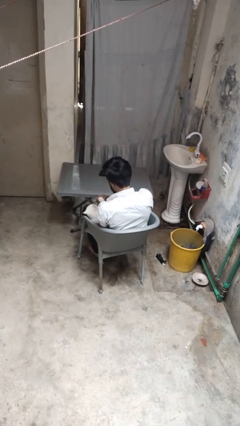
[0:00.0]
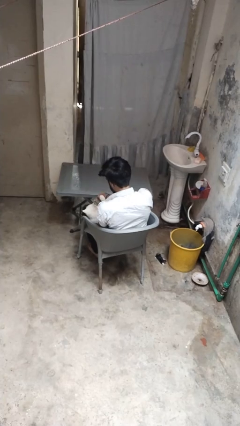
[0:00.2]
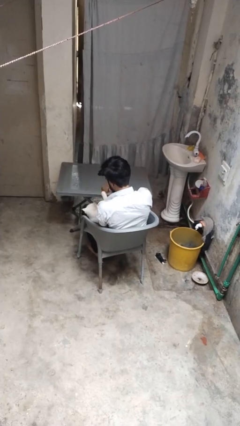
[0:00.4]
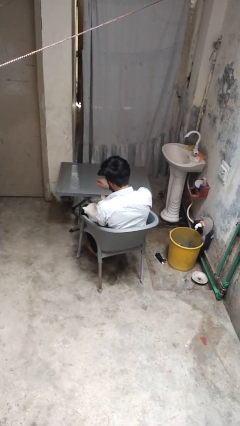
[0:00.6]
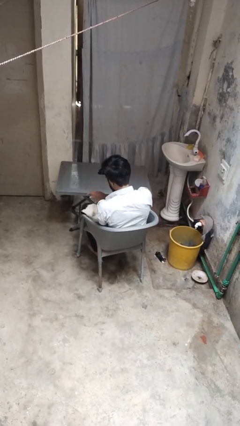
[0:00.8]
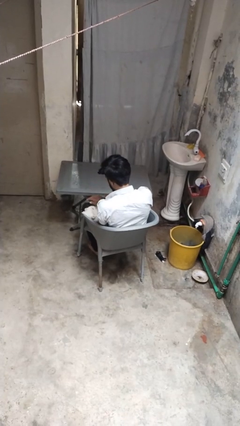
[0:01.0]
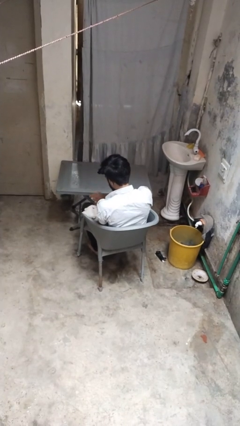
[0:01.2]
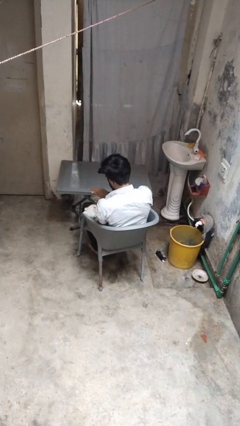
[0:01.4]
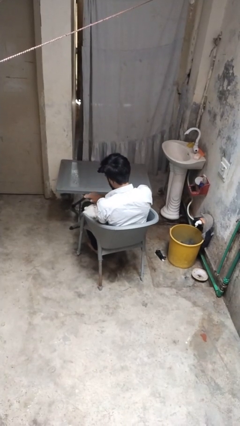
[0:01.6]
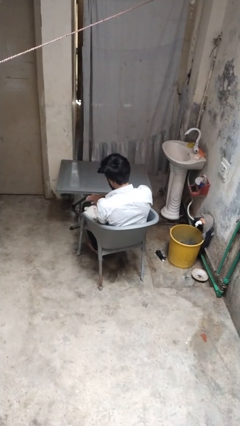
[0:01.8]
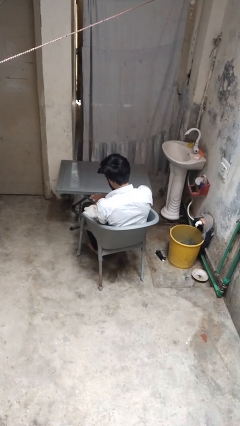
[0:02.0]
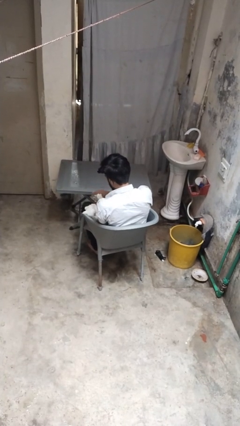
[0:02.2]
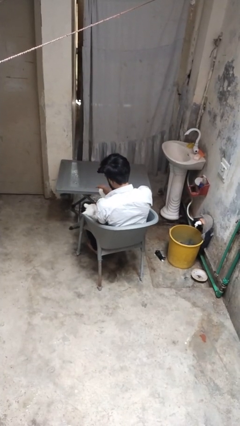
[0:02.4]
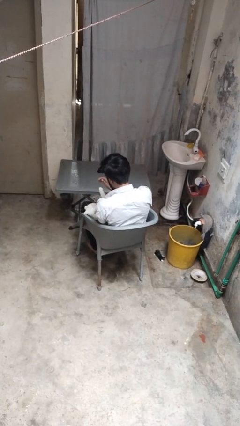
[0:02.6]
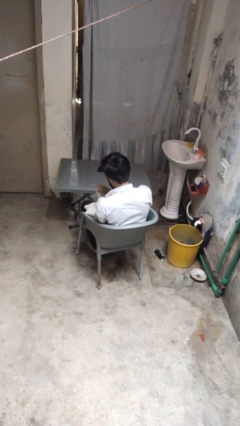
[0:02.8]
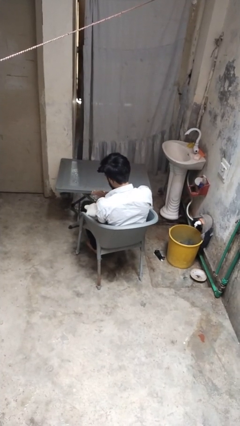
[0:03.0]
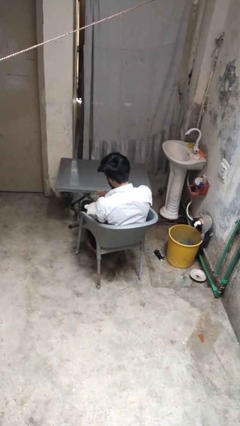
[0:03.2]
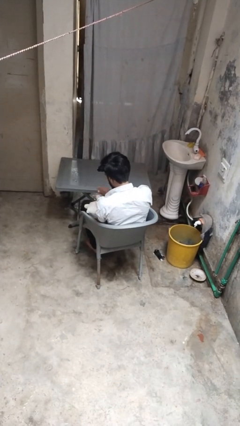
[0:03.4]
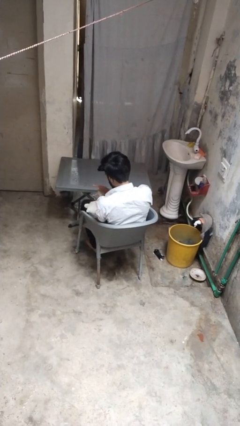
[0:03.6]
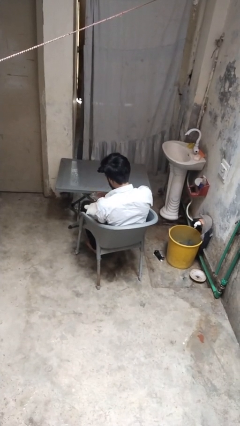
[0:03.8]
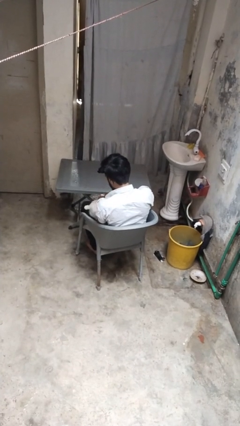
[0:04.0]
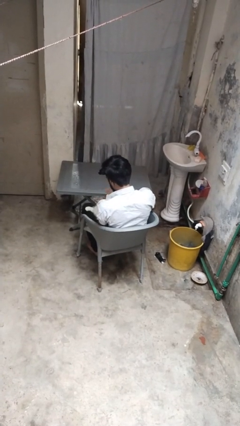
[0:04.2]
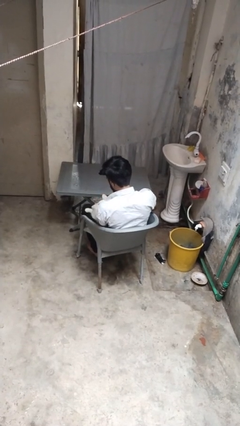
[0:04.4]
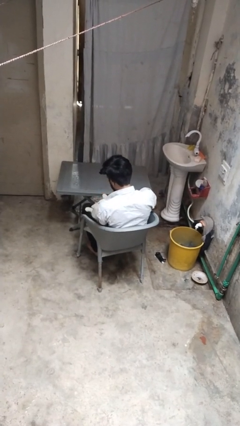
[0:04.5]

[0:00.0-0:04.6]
person pets cat

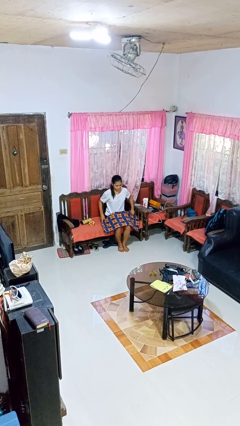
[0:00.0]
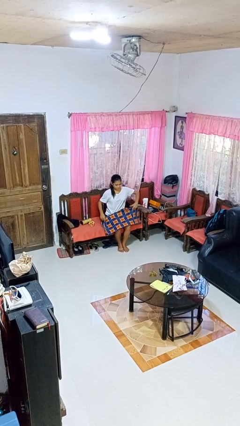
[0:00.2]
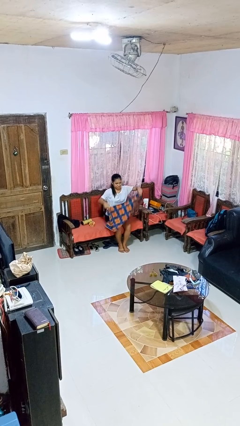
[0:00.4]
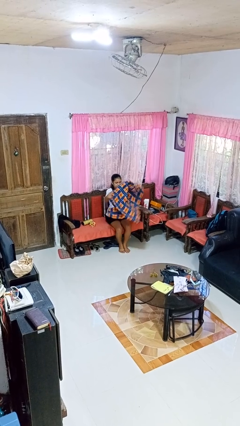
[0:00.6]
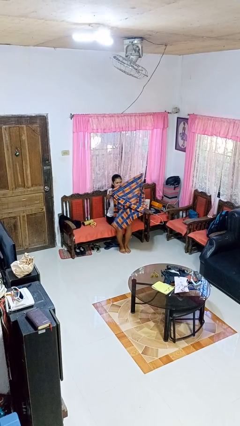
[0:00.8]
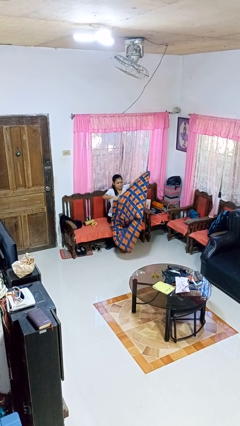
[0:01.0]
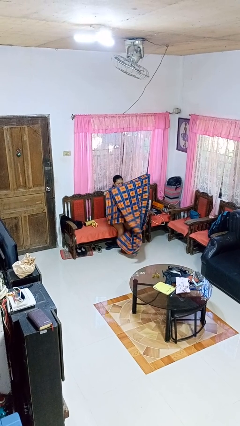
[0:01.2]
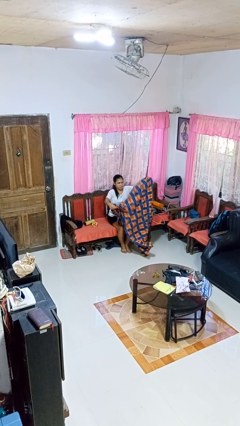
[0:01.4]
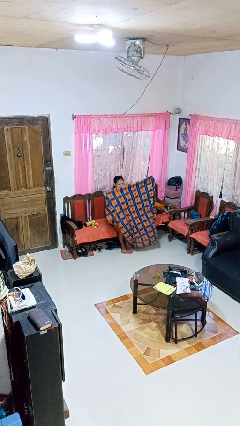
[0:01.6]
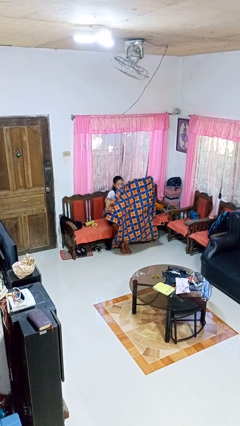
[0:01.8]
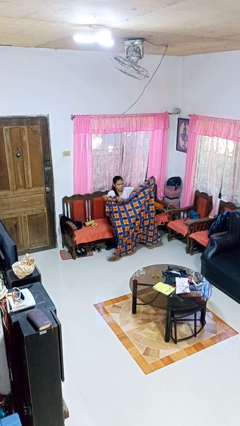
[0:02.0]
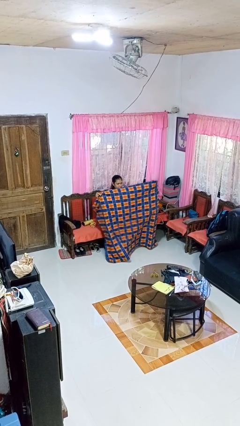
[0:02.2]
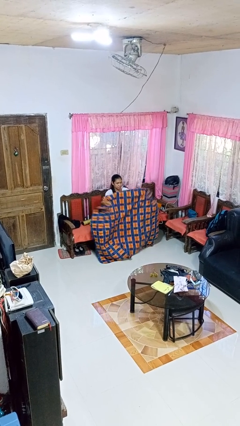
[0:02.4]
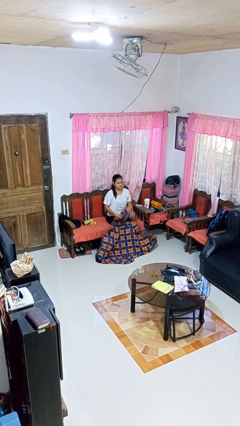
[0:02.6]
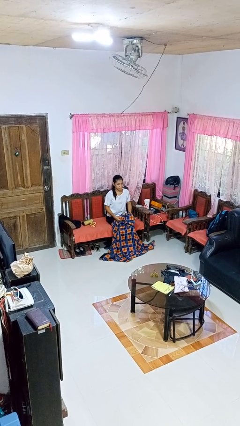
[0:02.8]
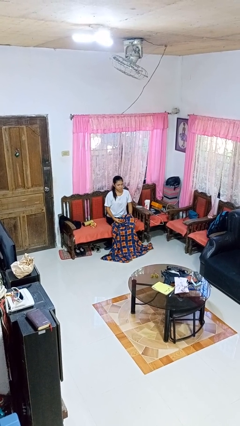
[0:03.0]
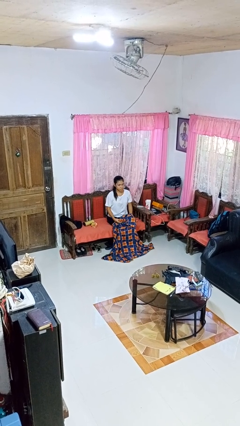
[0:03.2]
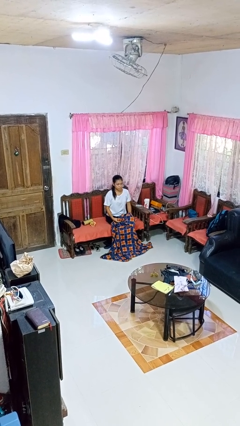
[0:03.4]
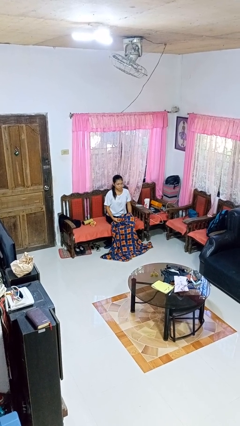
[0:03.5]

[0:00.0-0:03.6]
person unfolds blanket

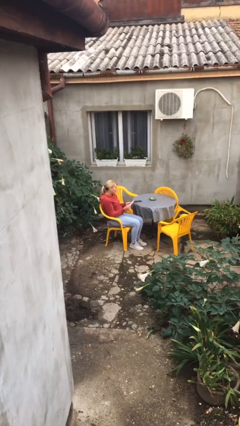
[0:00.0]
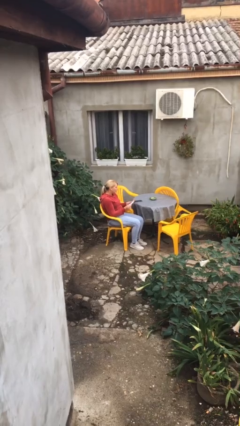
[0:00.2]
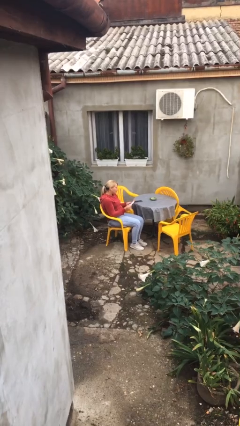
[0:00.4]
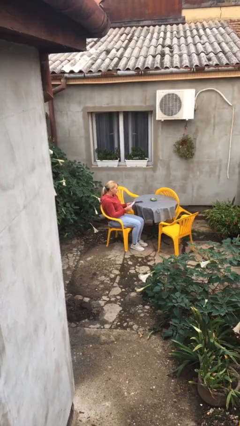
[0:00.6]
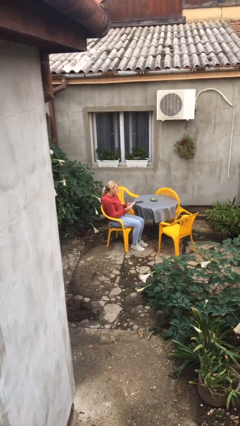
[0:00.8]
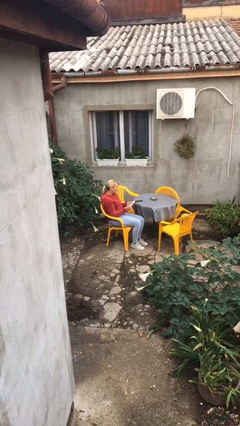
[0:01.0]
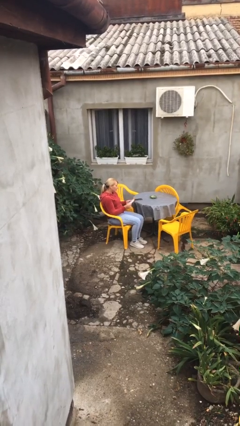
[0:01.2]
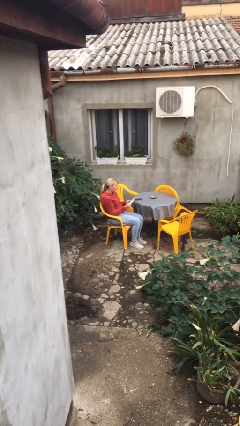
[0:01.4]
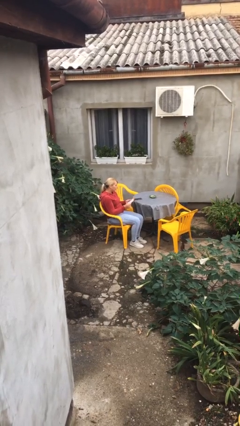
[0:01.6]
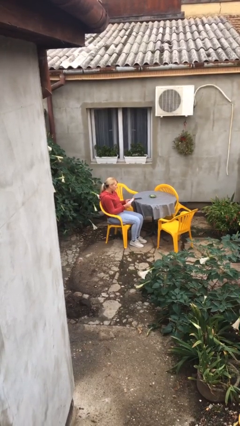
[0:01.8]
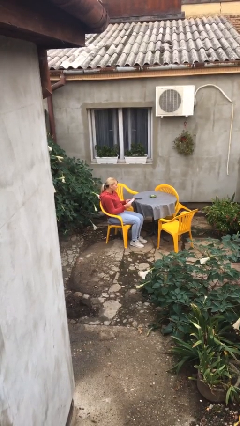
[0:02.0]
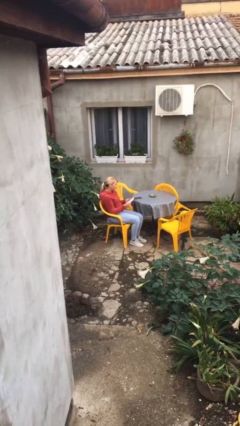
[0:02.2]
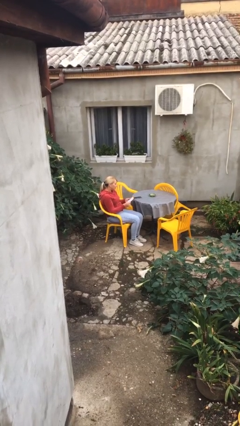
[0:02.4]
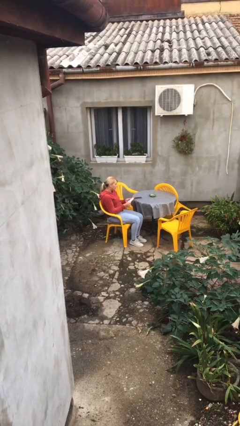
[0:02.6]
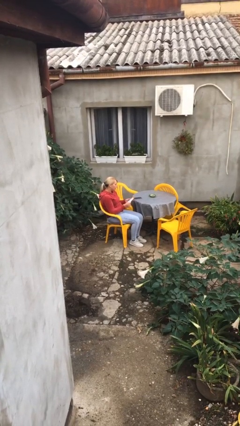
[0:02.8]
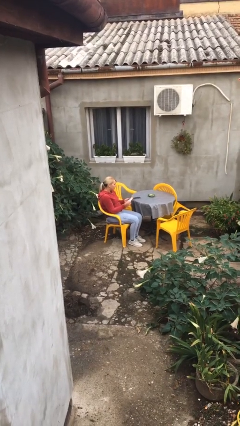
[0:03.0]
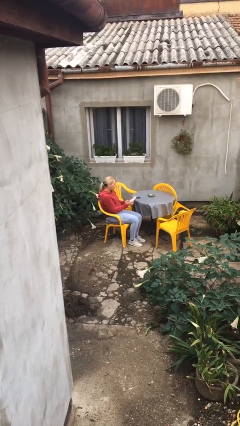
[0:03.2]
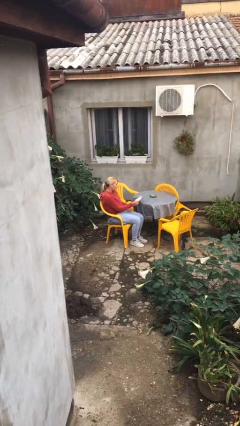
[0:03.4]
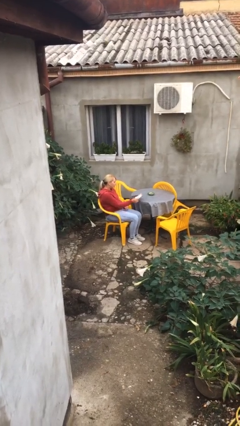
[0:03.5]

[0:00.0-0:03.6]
person reads document

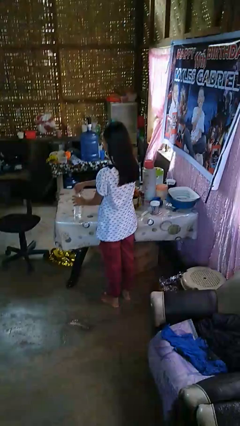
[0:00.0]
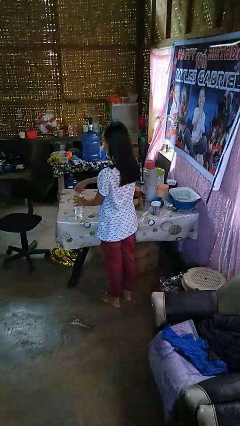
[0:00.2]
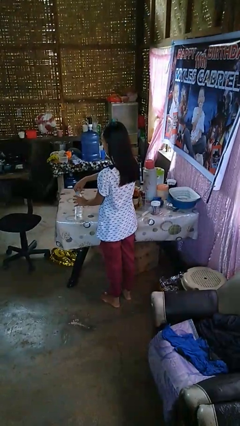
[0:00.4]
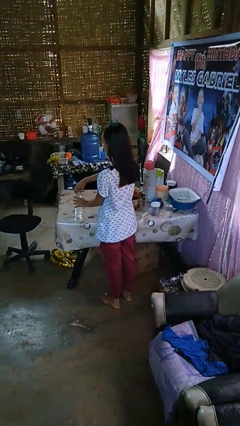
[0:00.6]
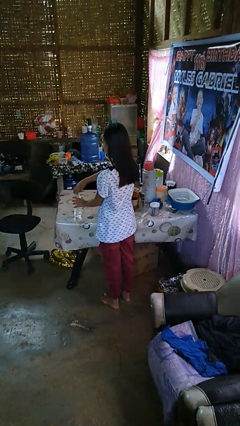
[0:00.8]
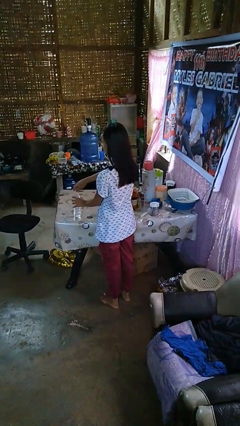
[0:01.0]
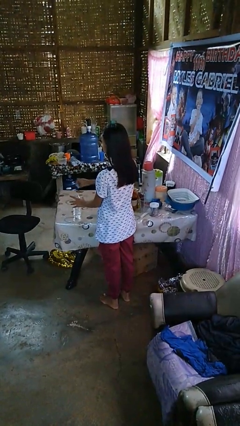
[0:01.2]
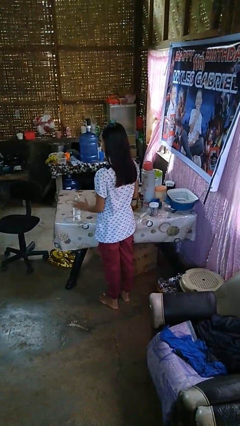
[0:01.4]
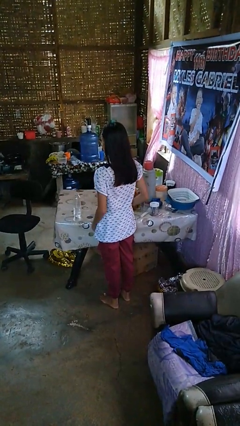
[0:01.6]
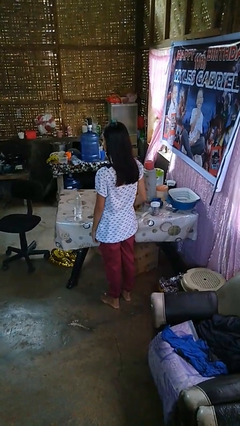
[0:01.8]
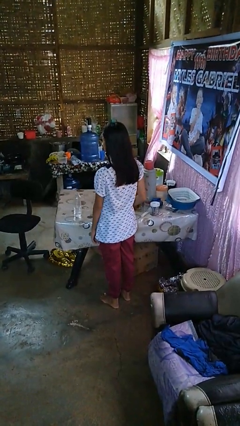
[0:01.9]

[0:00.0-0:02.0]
person unscrews lid from bottle

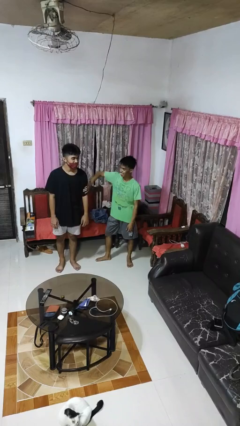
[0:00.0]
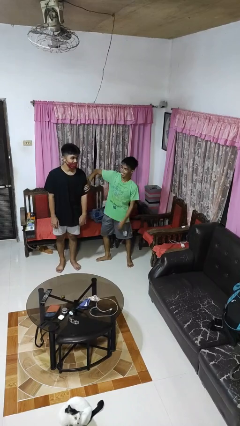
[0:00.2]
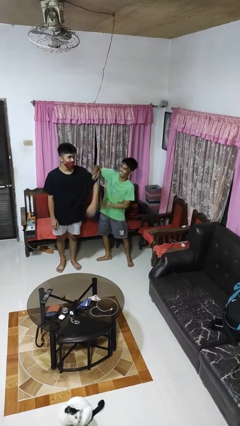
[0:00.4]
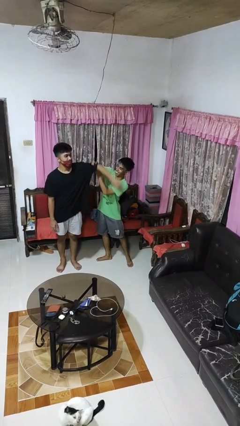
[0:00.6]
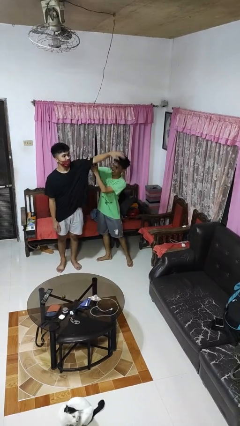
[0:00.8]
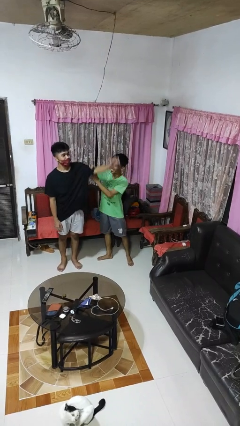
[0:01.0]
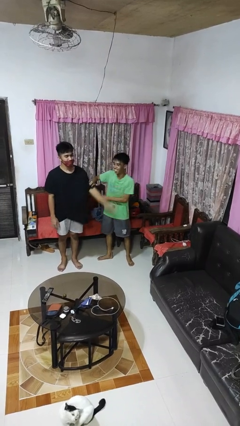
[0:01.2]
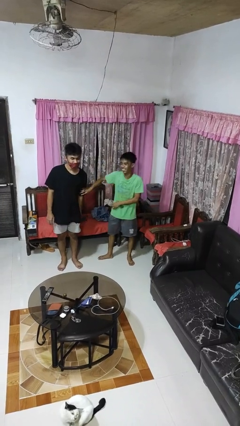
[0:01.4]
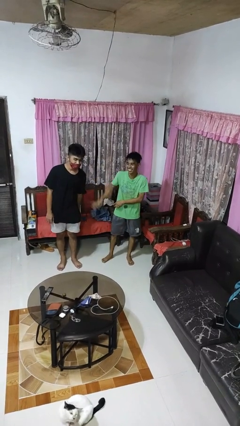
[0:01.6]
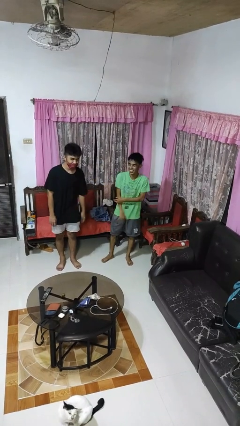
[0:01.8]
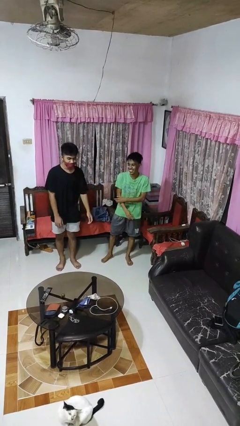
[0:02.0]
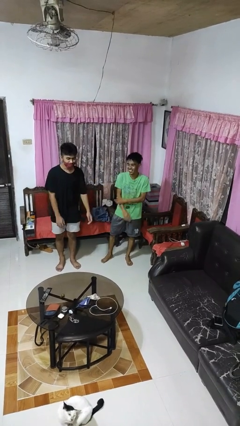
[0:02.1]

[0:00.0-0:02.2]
person grabs person by bicep

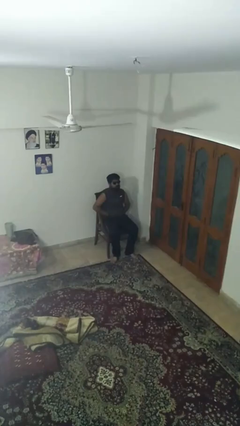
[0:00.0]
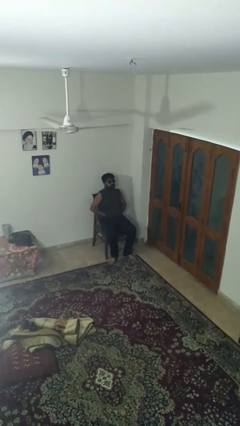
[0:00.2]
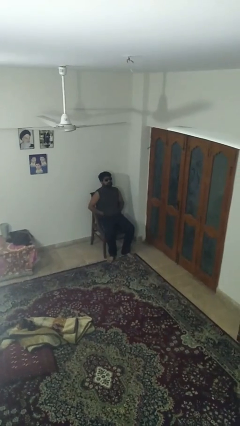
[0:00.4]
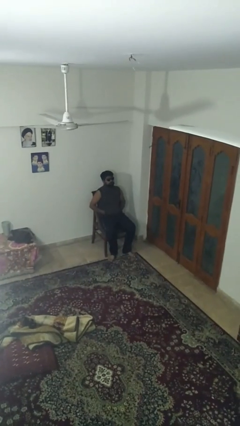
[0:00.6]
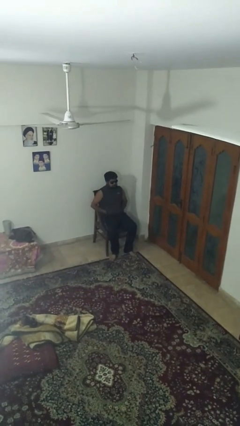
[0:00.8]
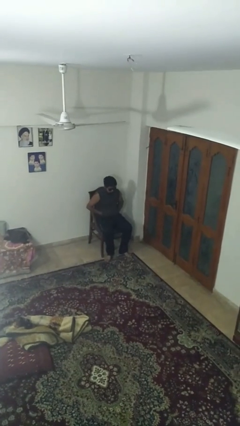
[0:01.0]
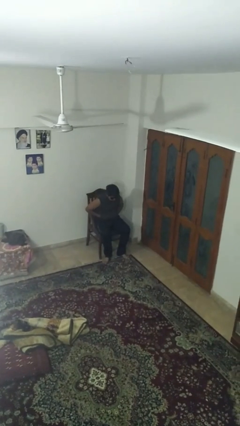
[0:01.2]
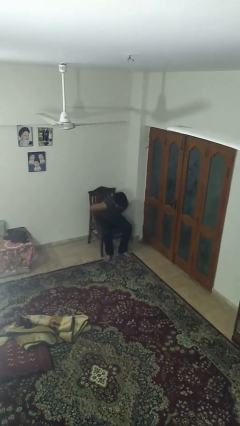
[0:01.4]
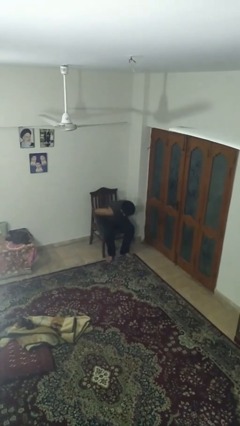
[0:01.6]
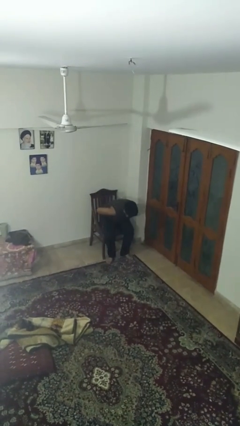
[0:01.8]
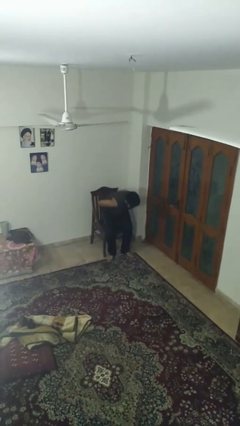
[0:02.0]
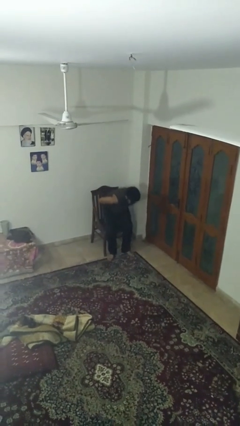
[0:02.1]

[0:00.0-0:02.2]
person stands up
